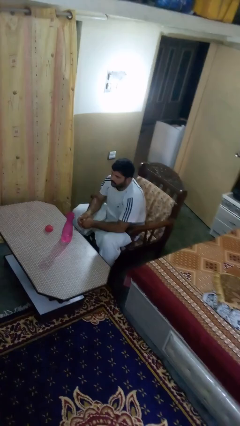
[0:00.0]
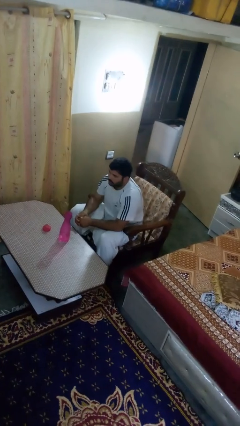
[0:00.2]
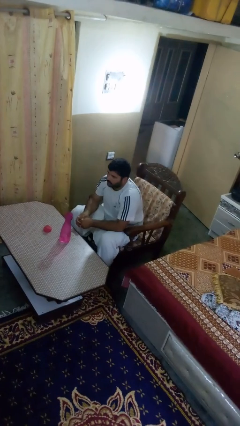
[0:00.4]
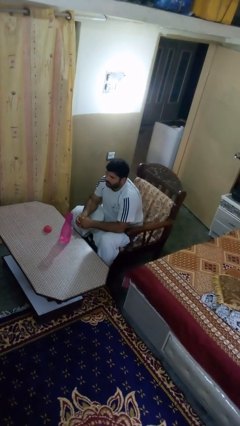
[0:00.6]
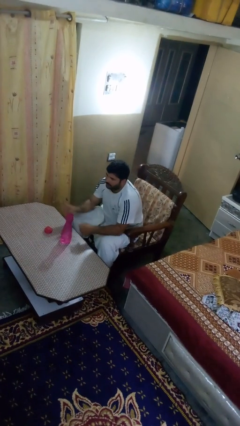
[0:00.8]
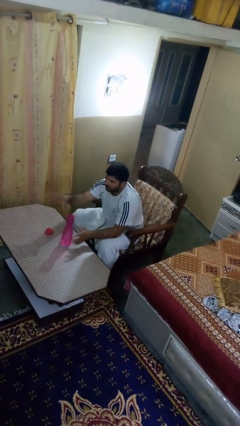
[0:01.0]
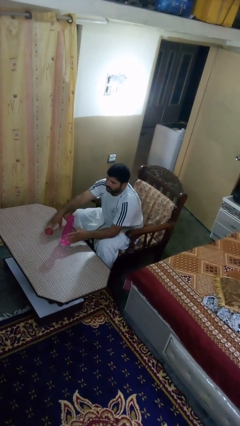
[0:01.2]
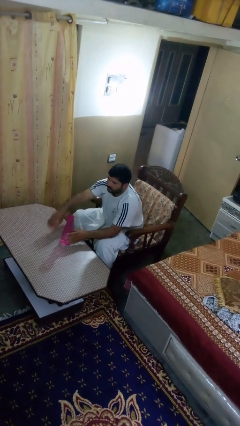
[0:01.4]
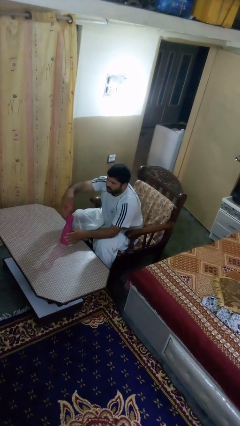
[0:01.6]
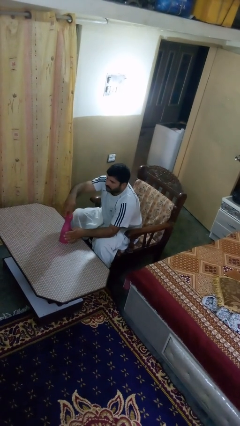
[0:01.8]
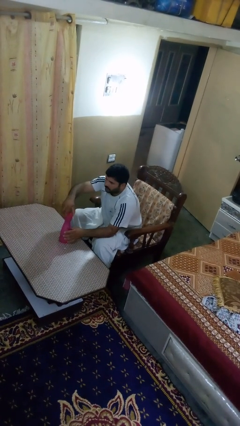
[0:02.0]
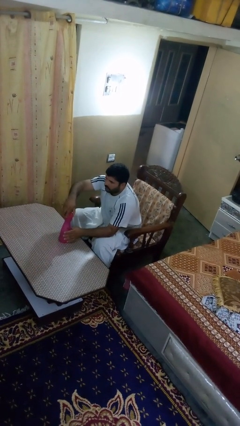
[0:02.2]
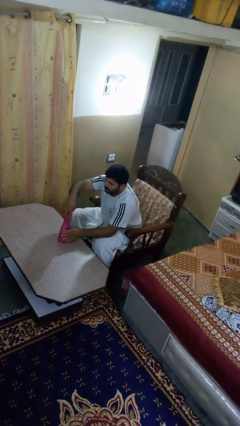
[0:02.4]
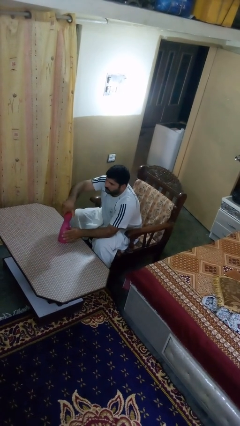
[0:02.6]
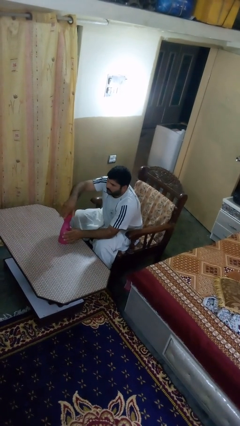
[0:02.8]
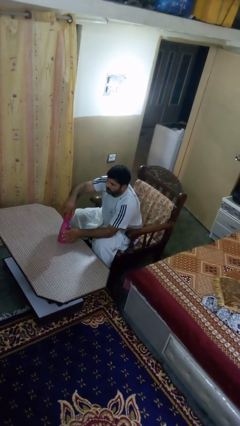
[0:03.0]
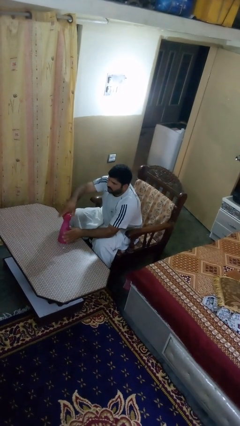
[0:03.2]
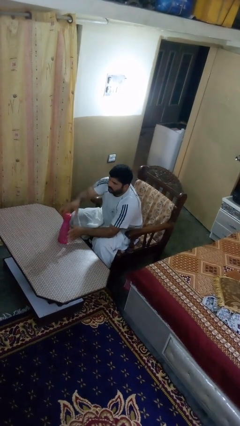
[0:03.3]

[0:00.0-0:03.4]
person screws lid to bottle

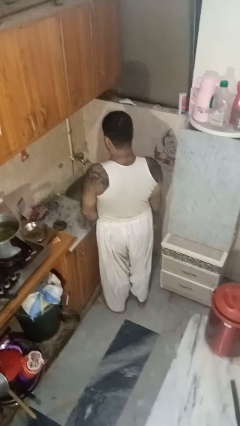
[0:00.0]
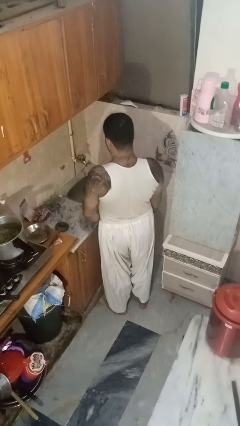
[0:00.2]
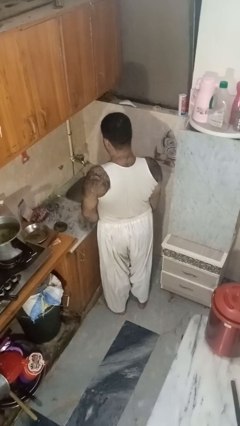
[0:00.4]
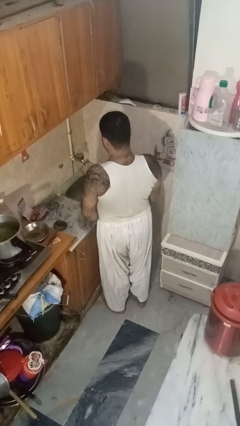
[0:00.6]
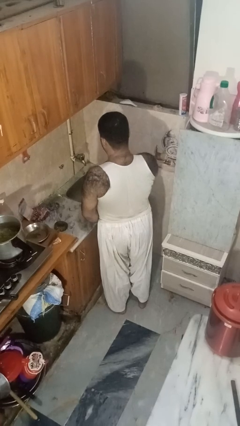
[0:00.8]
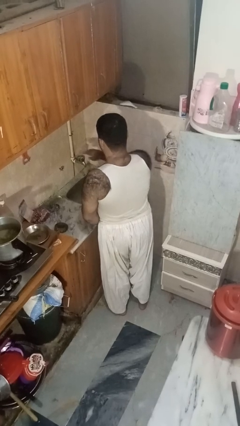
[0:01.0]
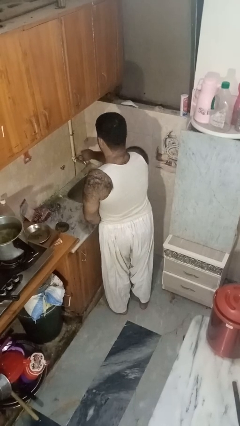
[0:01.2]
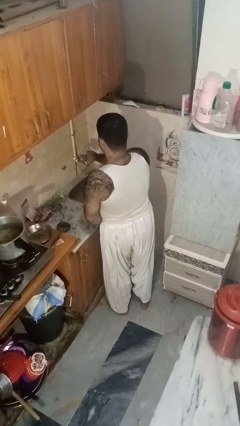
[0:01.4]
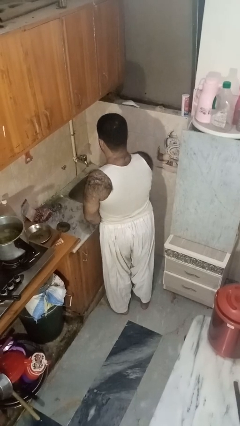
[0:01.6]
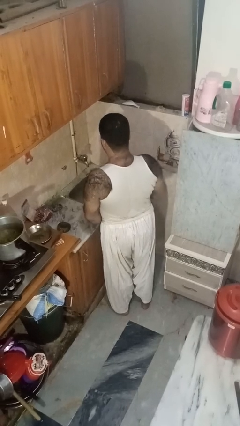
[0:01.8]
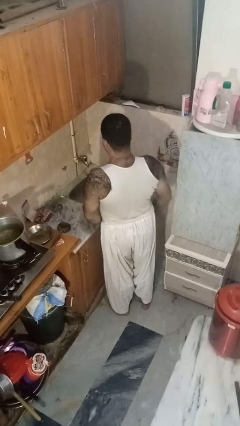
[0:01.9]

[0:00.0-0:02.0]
person turns off faucet

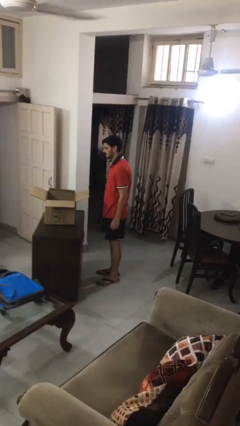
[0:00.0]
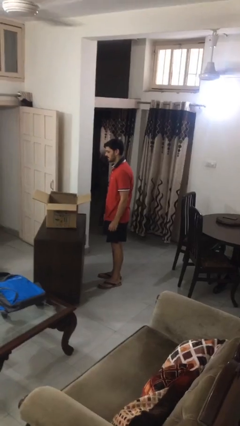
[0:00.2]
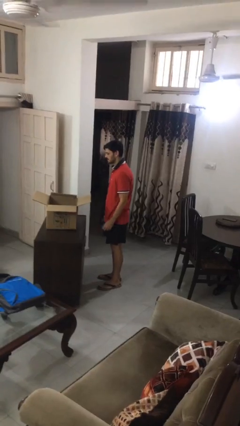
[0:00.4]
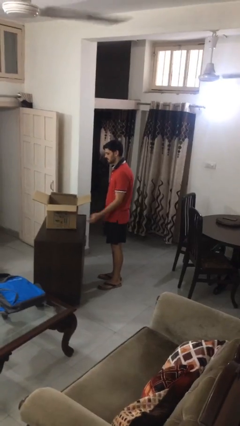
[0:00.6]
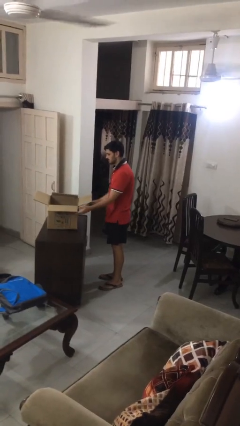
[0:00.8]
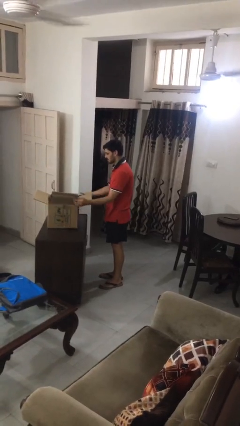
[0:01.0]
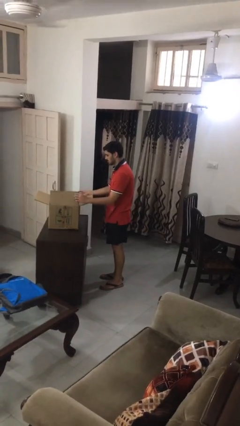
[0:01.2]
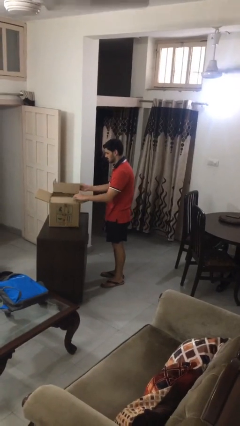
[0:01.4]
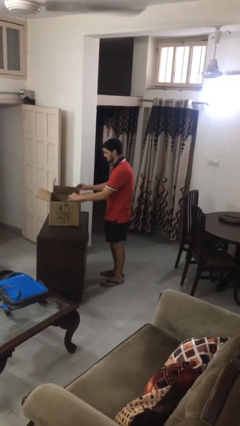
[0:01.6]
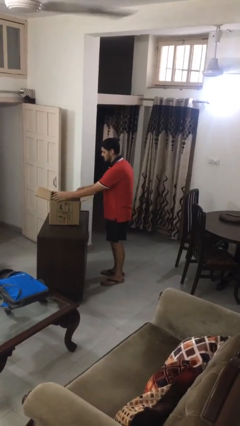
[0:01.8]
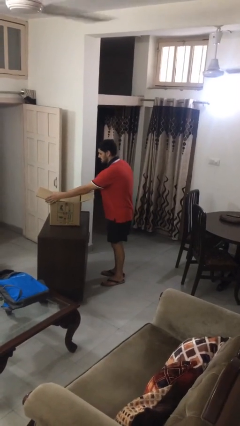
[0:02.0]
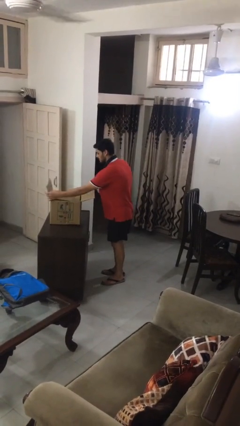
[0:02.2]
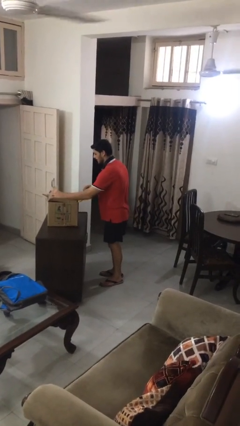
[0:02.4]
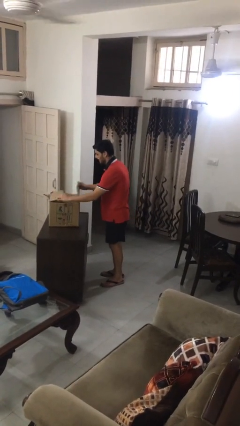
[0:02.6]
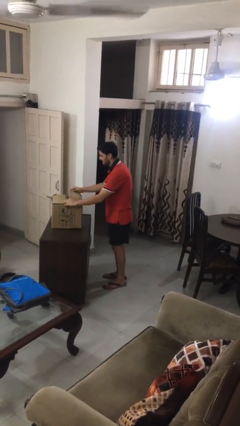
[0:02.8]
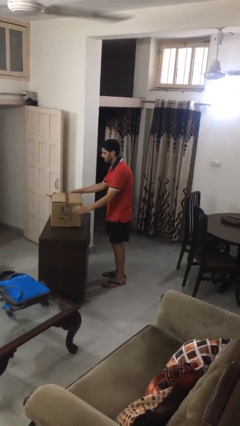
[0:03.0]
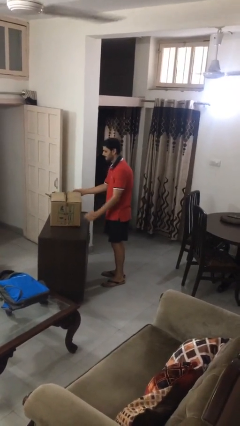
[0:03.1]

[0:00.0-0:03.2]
person closes box

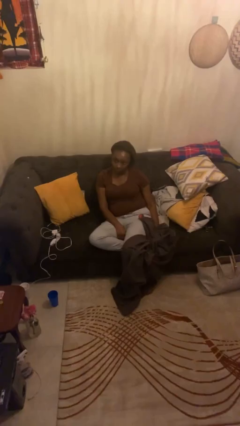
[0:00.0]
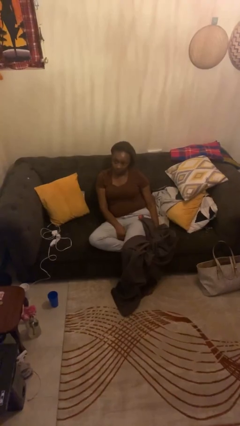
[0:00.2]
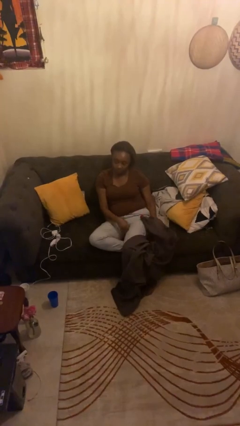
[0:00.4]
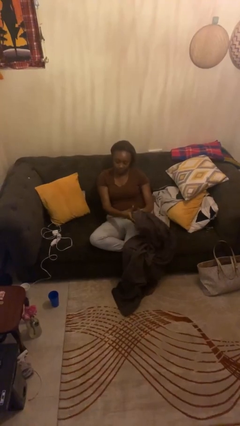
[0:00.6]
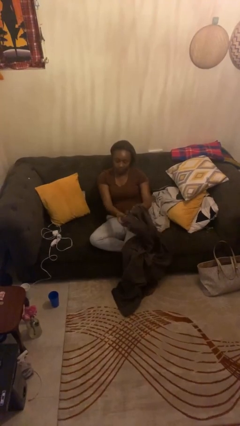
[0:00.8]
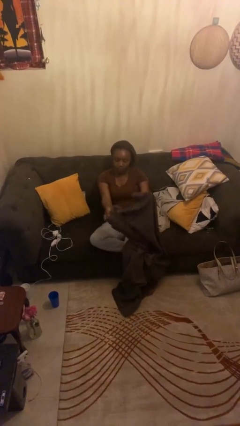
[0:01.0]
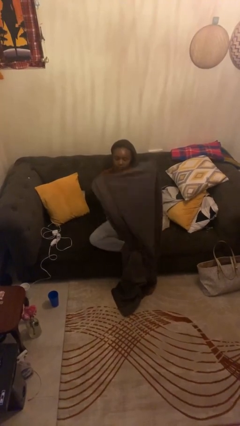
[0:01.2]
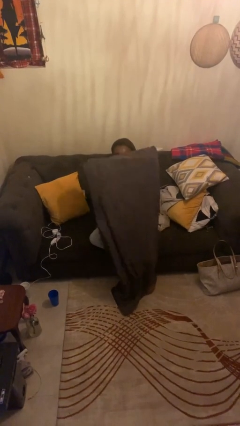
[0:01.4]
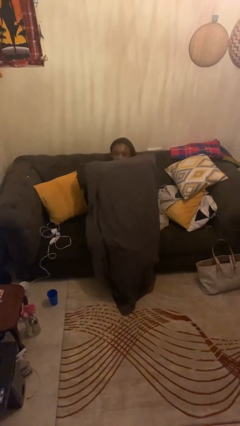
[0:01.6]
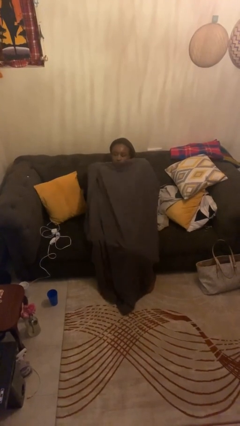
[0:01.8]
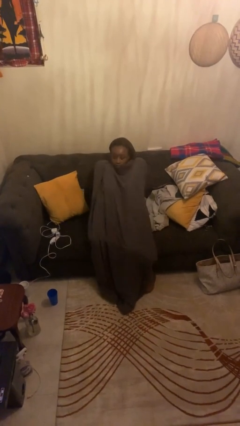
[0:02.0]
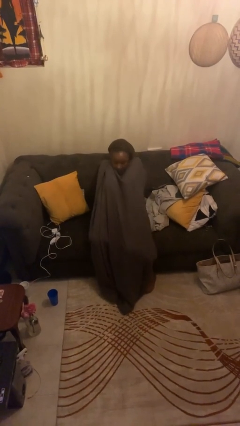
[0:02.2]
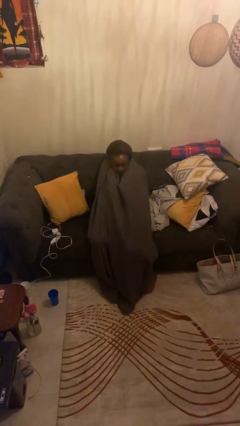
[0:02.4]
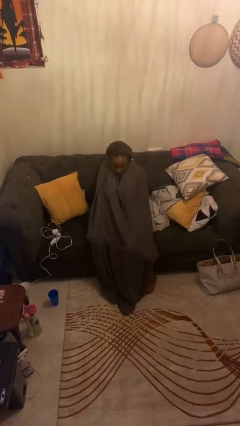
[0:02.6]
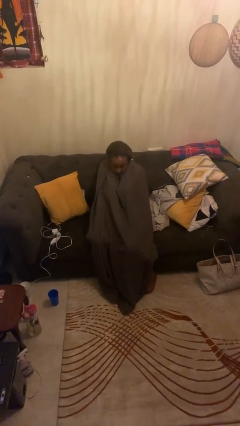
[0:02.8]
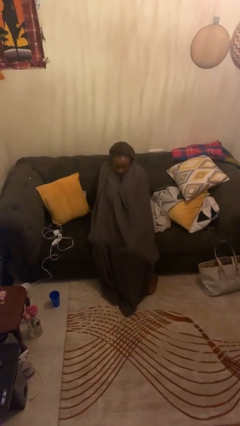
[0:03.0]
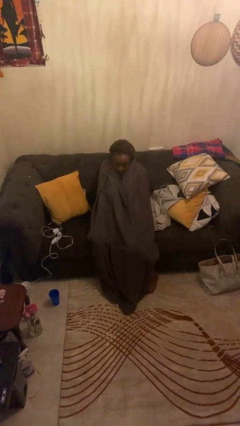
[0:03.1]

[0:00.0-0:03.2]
person covers with blanket

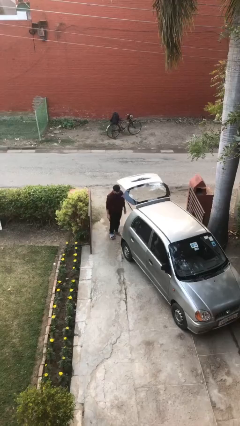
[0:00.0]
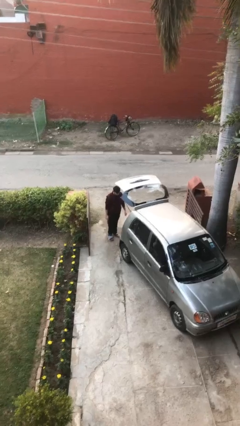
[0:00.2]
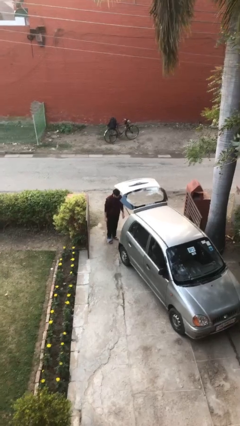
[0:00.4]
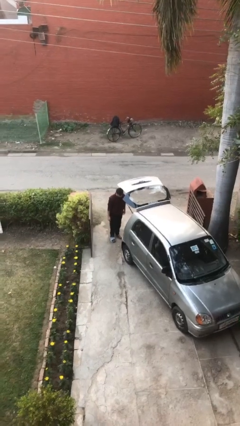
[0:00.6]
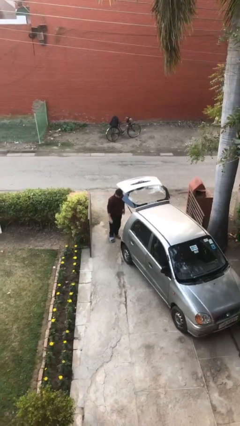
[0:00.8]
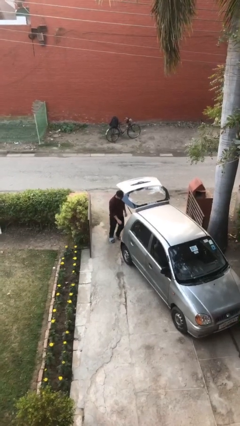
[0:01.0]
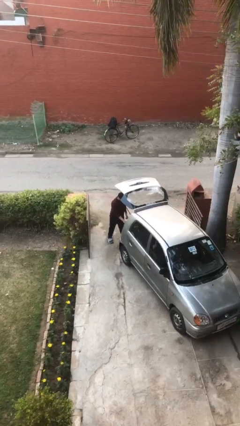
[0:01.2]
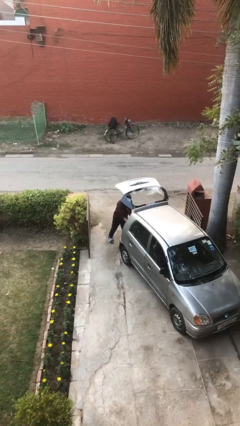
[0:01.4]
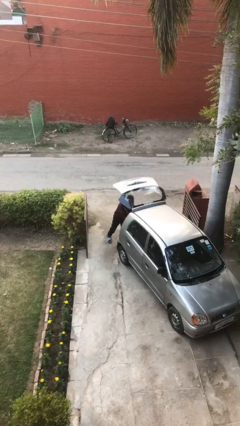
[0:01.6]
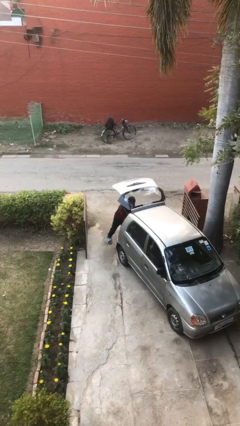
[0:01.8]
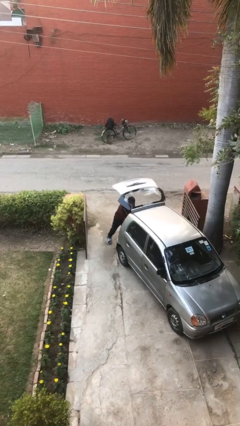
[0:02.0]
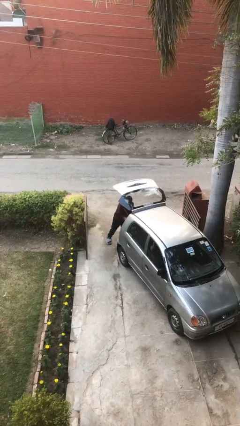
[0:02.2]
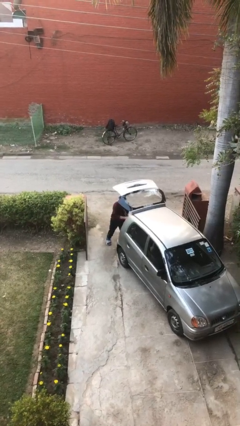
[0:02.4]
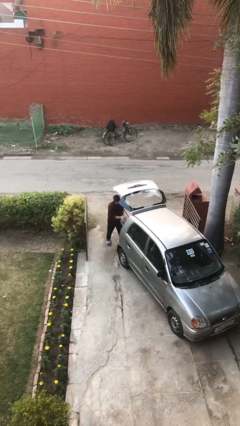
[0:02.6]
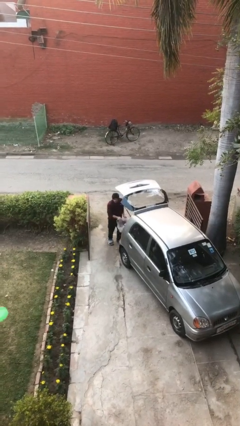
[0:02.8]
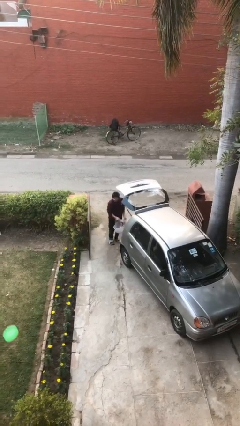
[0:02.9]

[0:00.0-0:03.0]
person unloads car

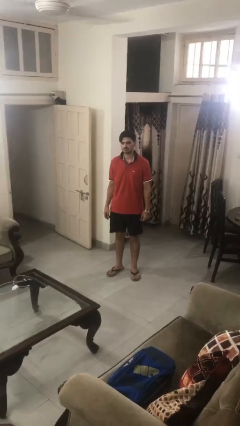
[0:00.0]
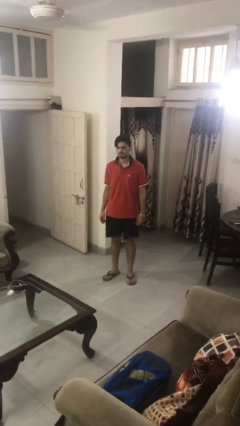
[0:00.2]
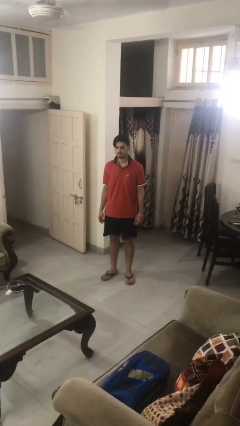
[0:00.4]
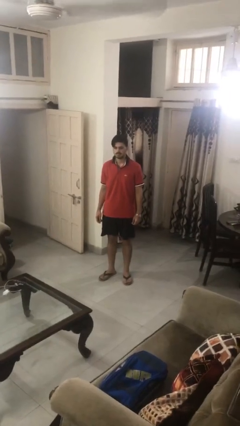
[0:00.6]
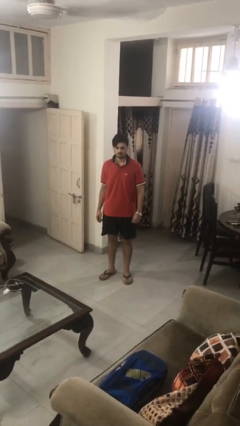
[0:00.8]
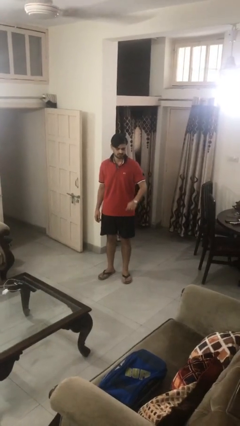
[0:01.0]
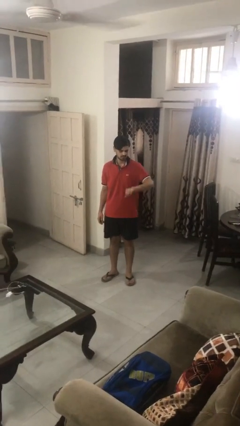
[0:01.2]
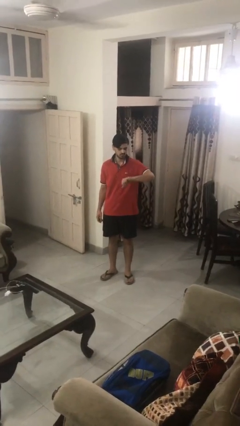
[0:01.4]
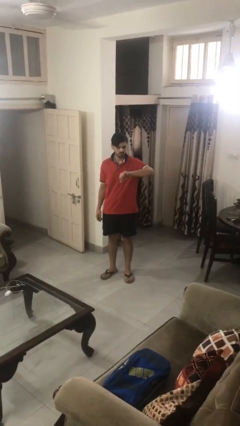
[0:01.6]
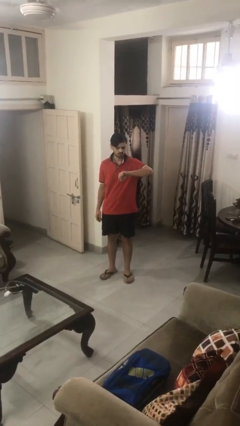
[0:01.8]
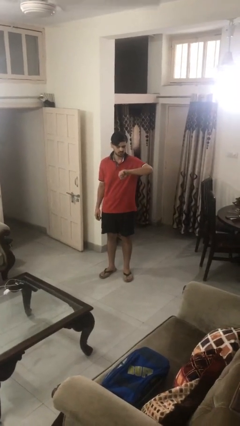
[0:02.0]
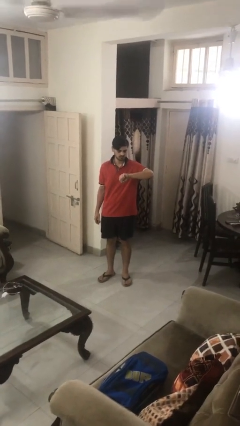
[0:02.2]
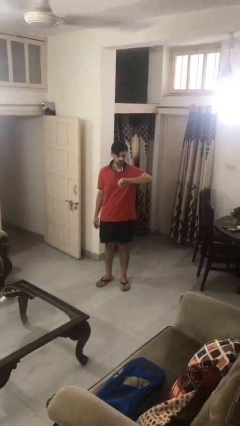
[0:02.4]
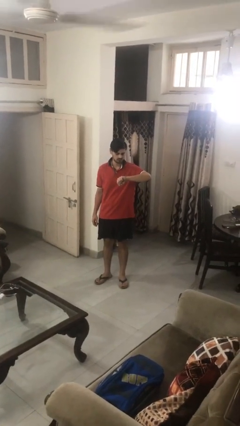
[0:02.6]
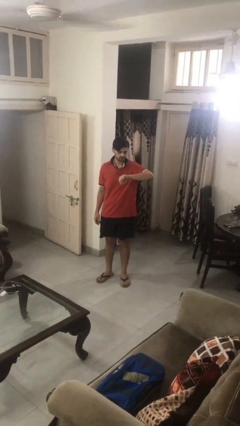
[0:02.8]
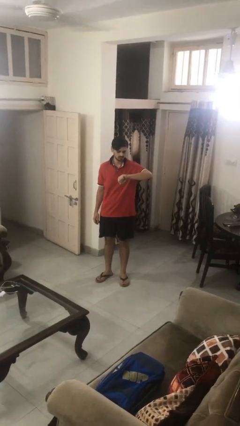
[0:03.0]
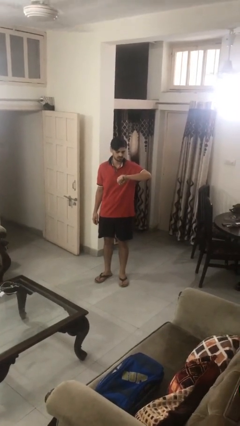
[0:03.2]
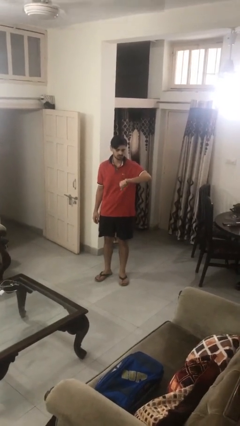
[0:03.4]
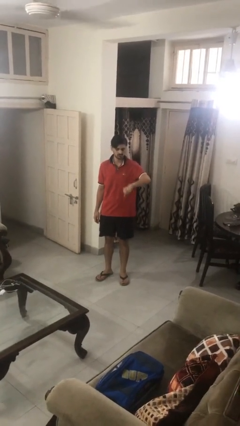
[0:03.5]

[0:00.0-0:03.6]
person looks at wristwatch
